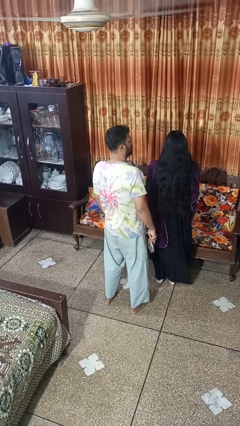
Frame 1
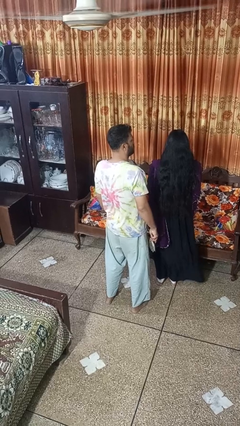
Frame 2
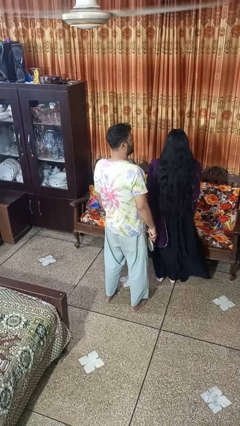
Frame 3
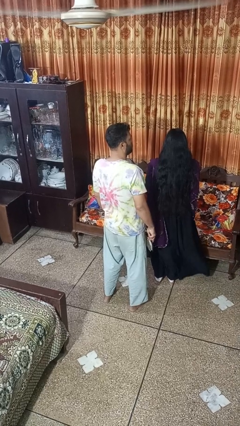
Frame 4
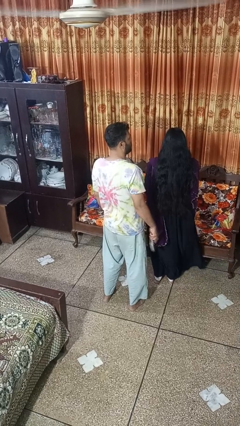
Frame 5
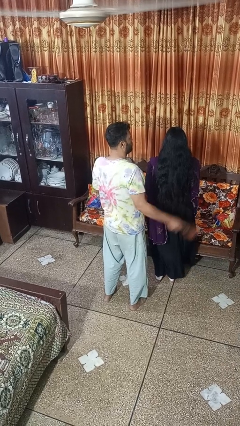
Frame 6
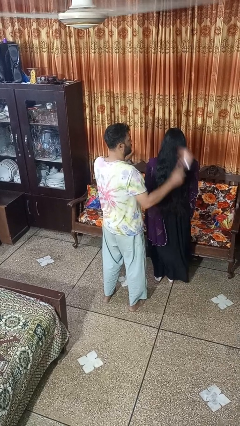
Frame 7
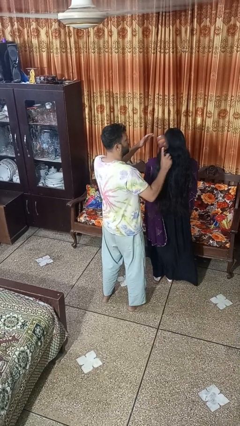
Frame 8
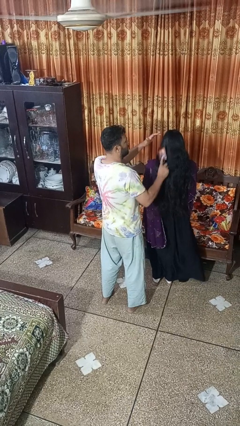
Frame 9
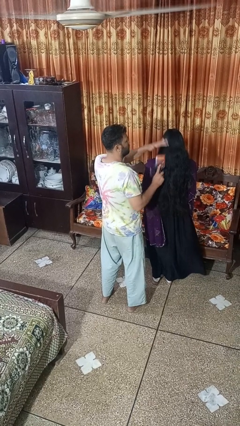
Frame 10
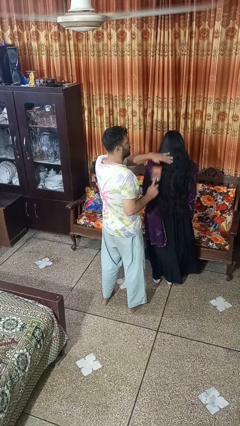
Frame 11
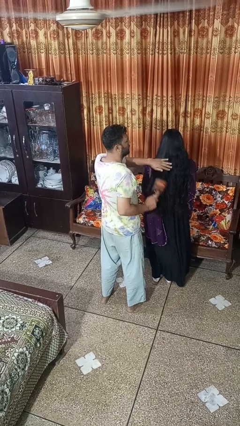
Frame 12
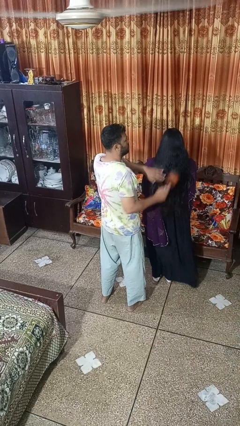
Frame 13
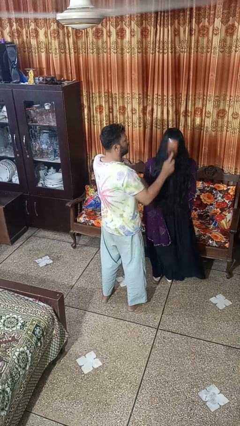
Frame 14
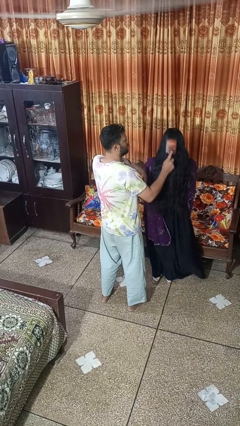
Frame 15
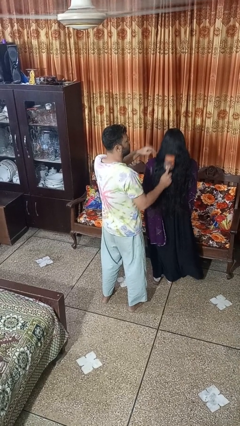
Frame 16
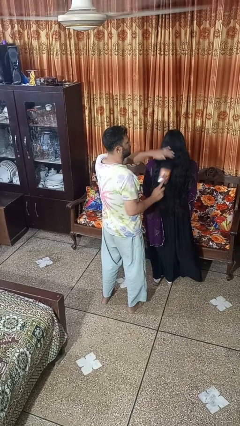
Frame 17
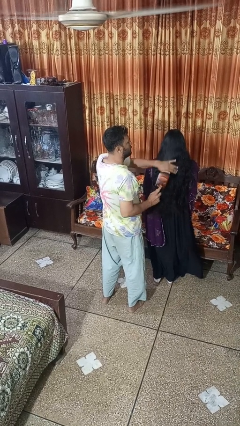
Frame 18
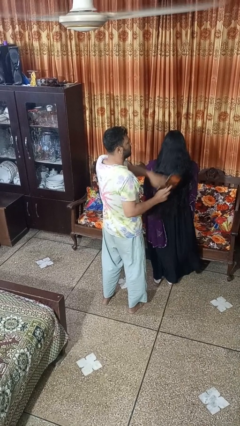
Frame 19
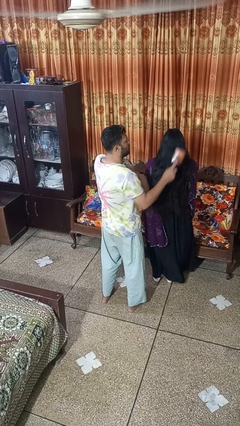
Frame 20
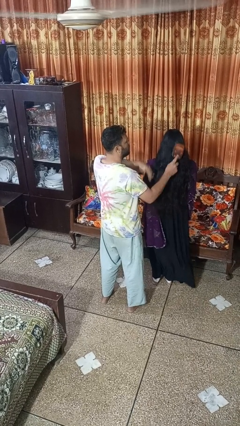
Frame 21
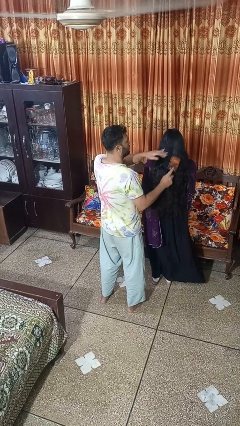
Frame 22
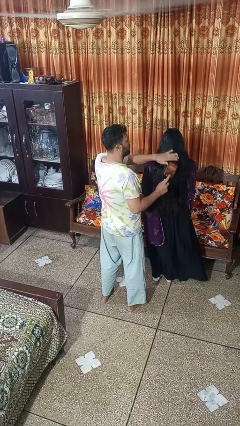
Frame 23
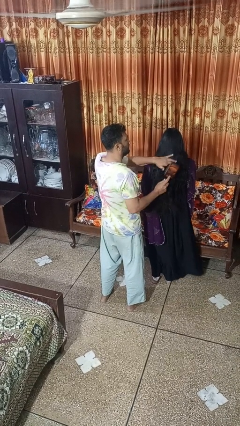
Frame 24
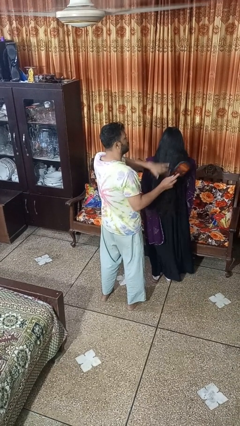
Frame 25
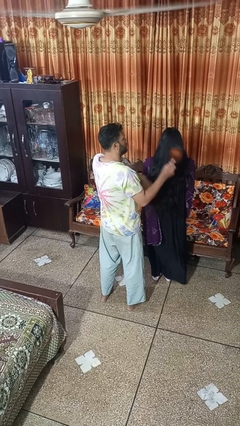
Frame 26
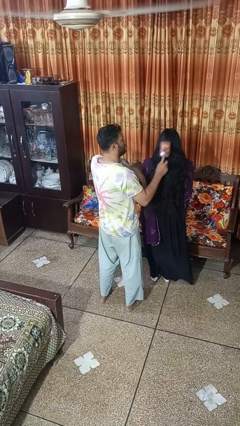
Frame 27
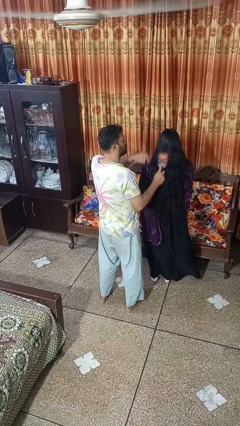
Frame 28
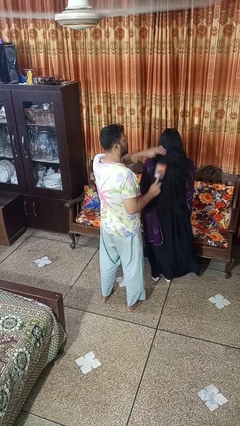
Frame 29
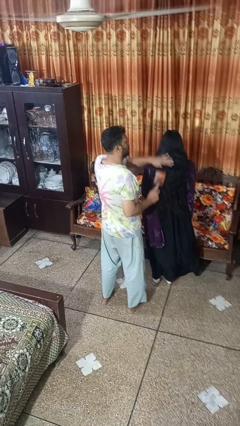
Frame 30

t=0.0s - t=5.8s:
person brushes hair of person

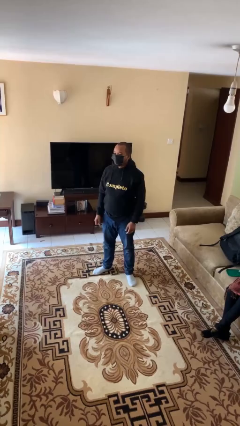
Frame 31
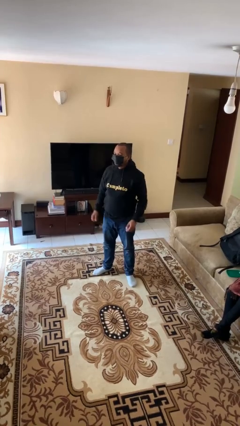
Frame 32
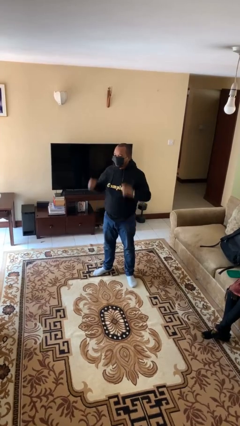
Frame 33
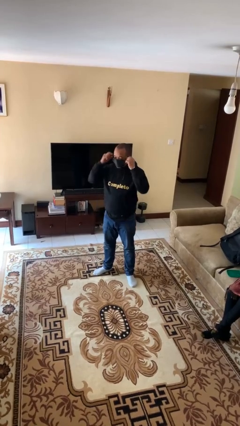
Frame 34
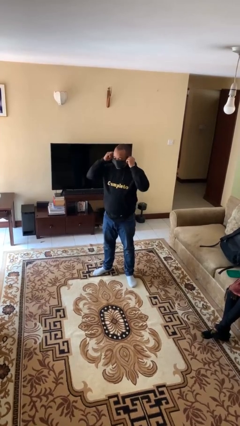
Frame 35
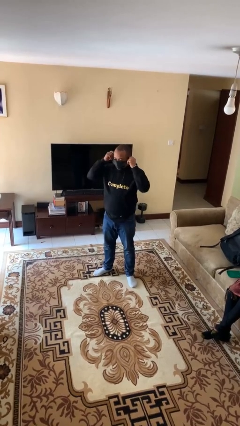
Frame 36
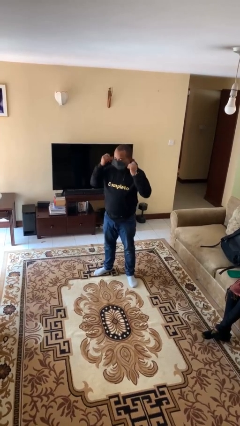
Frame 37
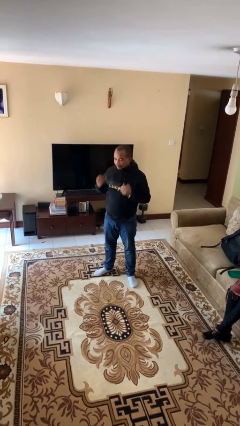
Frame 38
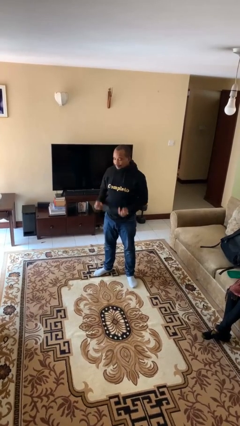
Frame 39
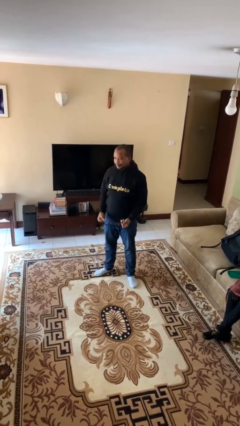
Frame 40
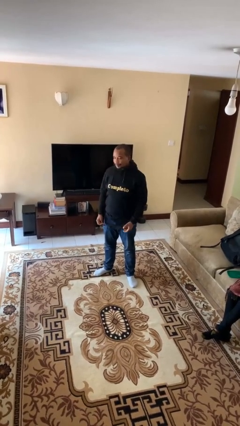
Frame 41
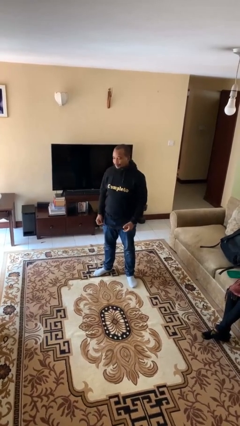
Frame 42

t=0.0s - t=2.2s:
person takes off facemask

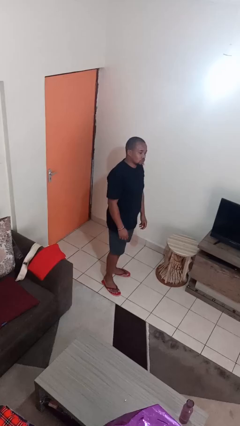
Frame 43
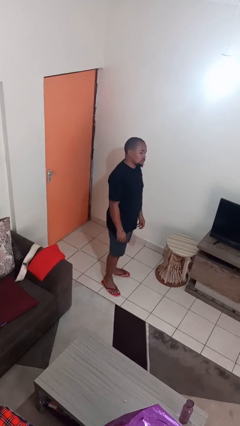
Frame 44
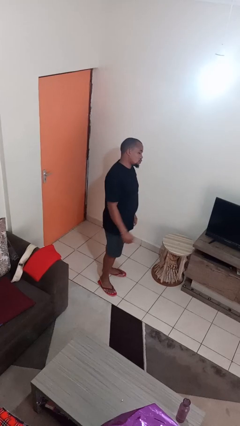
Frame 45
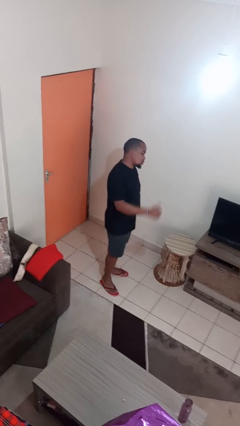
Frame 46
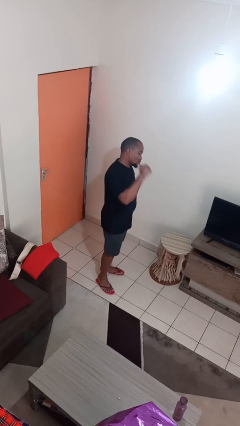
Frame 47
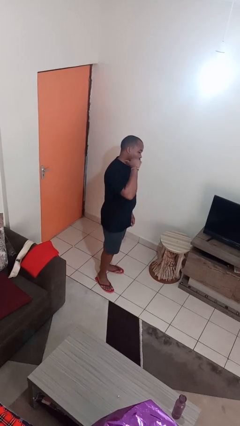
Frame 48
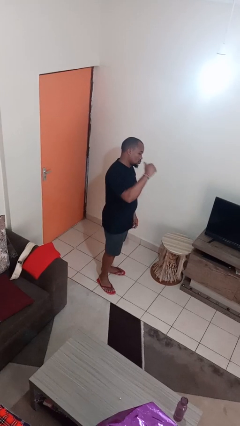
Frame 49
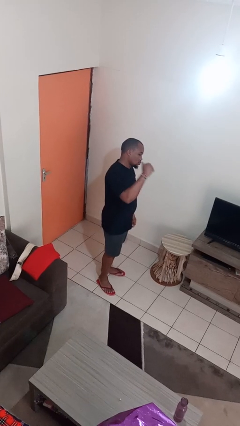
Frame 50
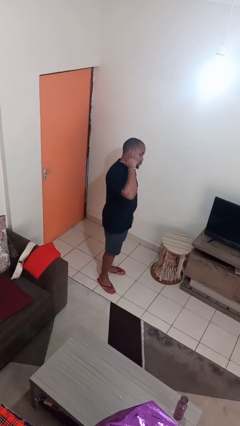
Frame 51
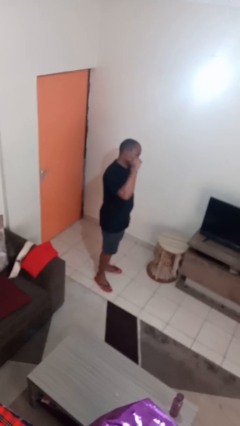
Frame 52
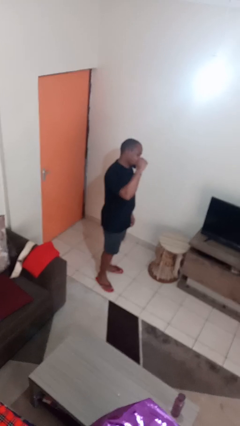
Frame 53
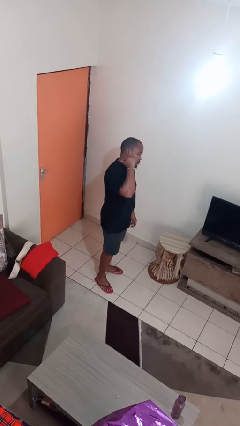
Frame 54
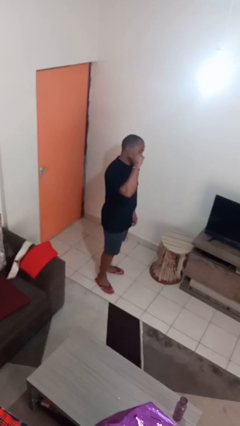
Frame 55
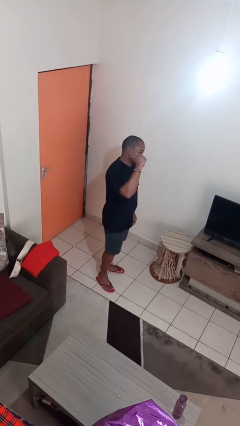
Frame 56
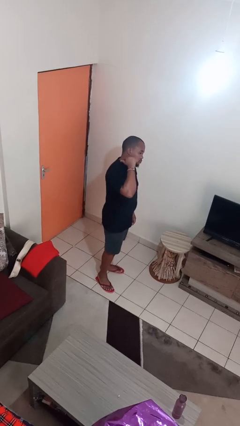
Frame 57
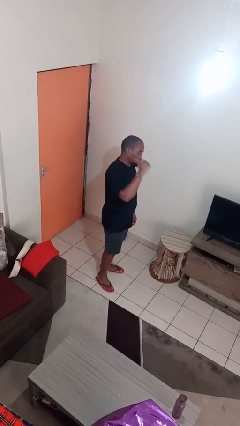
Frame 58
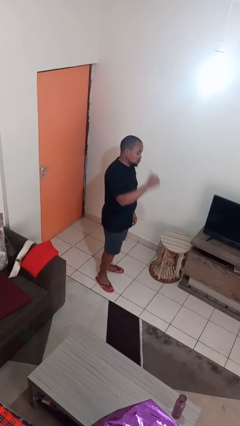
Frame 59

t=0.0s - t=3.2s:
person gestures behind me

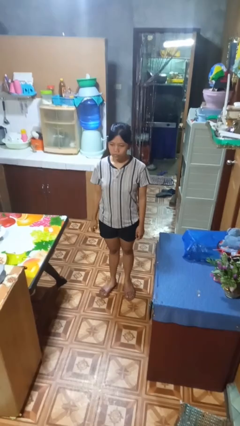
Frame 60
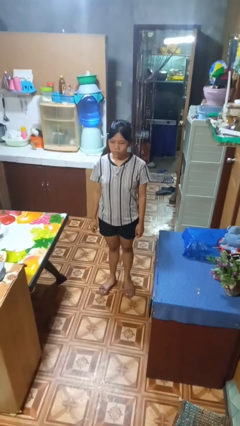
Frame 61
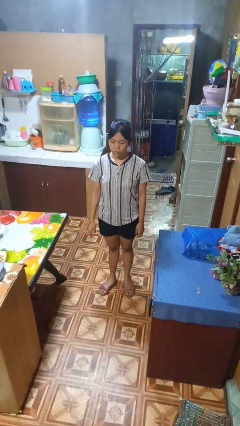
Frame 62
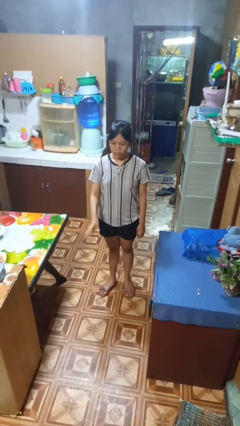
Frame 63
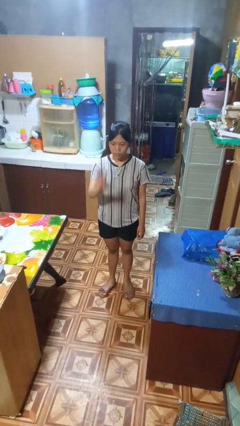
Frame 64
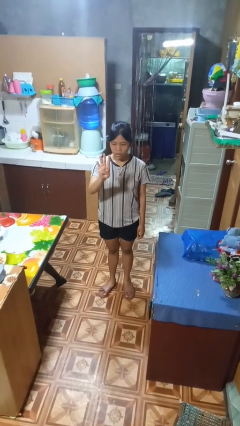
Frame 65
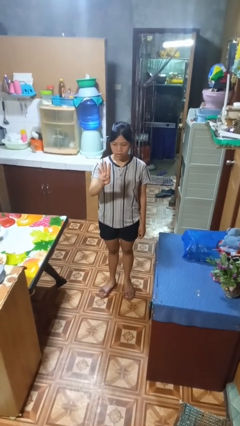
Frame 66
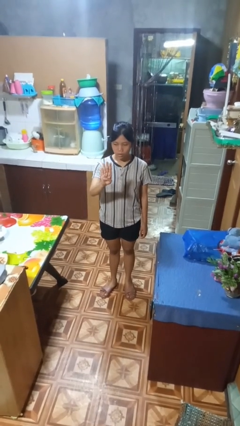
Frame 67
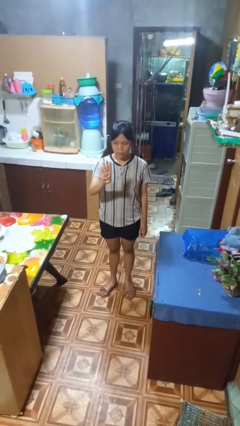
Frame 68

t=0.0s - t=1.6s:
person gestures number four

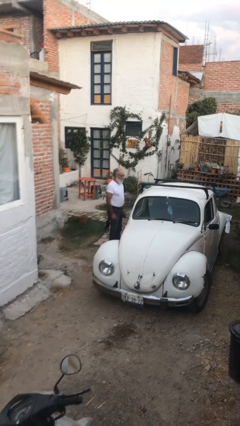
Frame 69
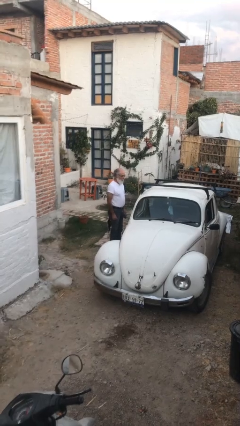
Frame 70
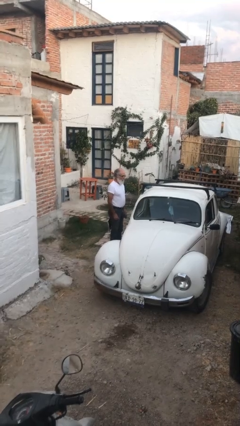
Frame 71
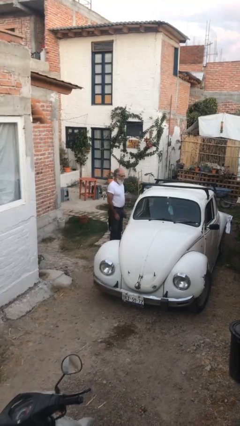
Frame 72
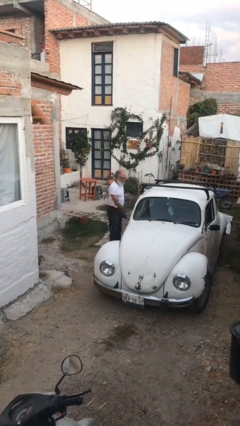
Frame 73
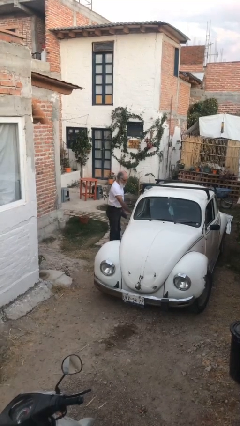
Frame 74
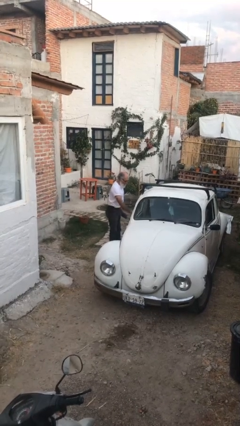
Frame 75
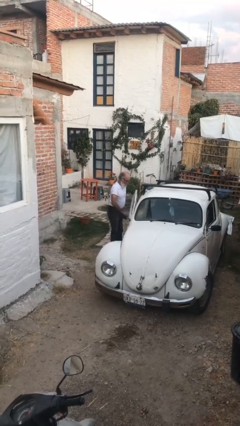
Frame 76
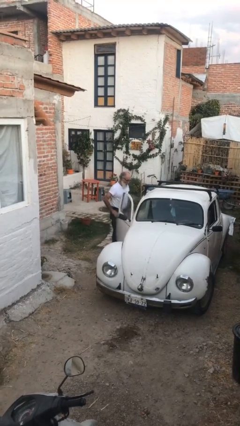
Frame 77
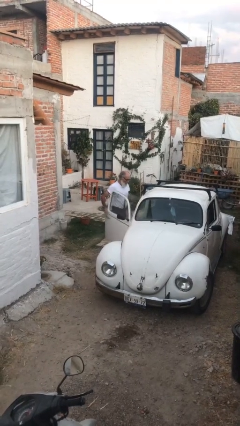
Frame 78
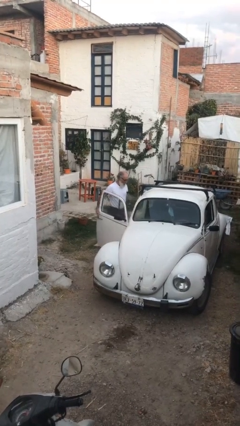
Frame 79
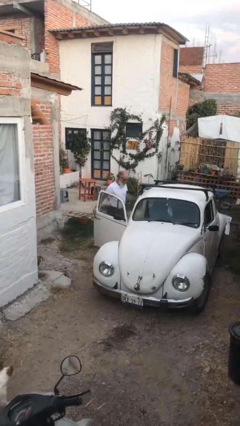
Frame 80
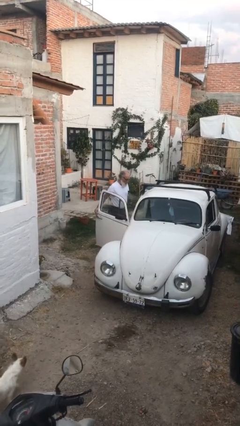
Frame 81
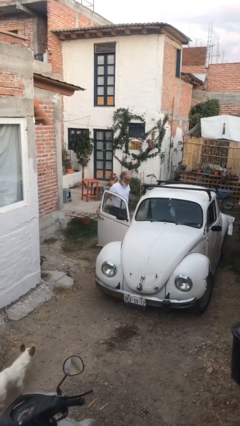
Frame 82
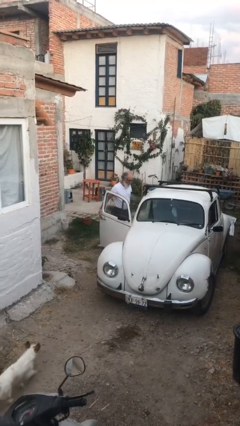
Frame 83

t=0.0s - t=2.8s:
person opens car door

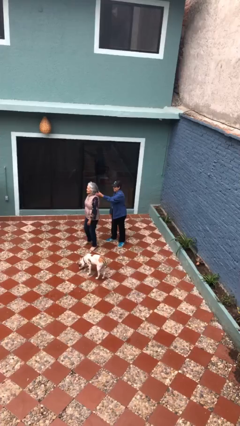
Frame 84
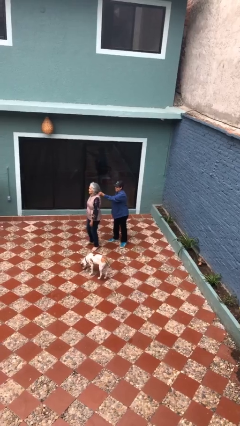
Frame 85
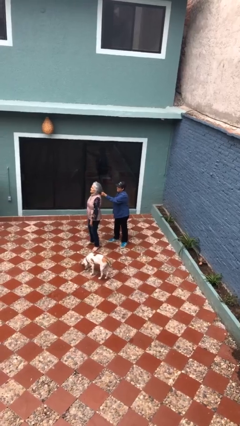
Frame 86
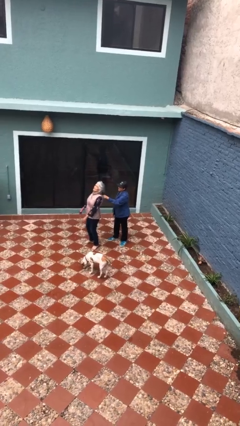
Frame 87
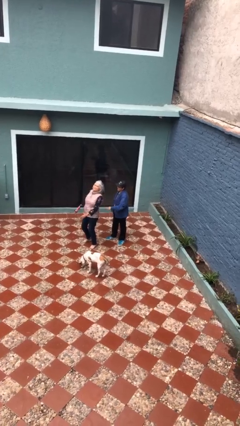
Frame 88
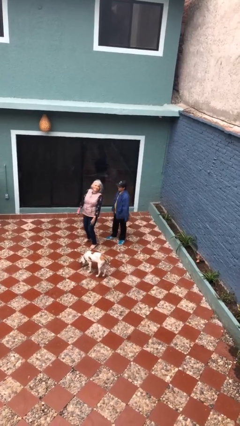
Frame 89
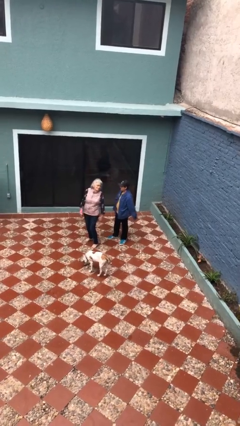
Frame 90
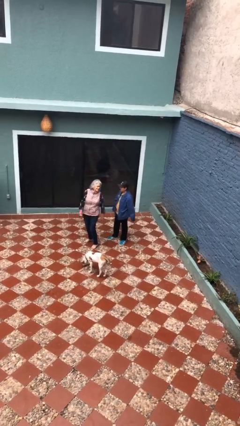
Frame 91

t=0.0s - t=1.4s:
person grabs person by hair

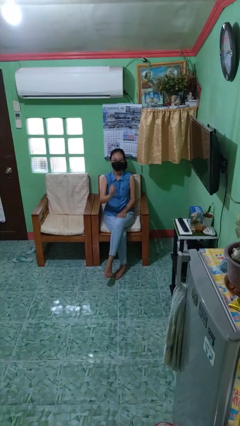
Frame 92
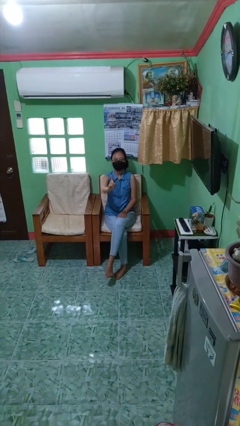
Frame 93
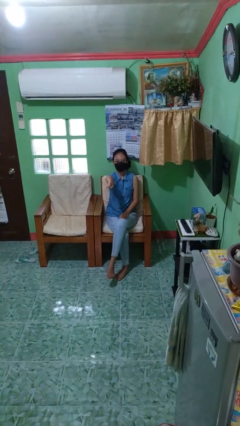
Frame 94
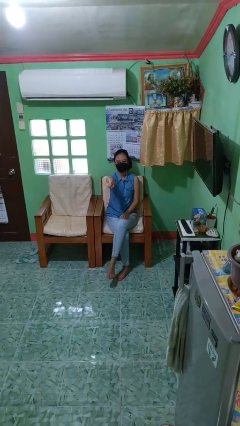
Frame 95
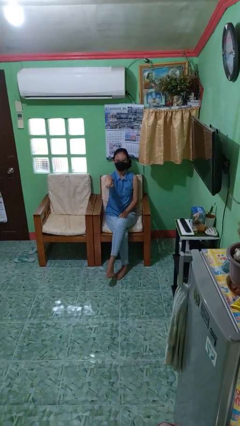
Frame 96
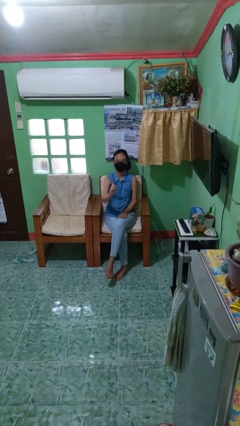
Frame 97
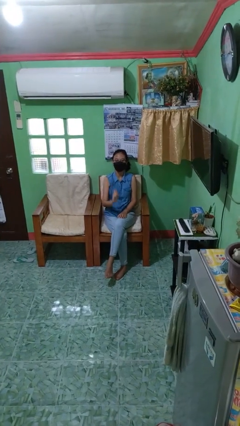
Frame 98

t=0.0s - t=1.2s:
person gestures number one
